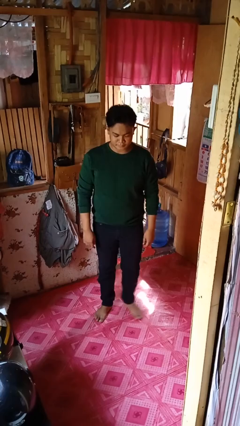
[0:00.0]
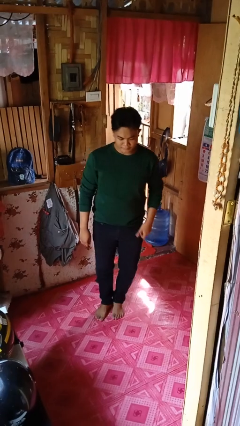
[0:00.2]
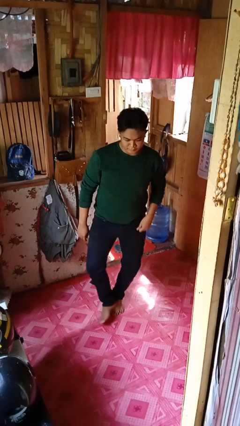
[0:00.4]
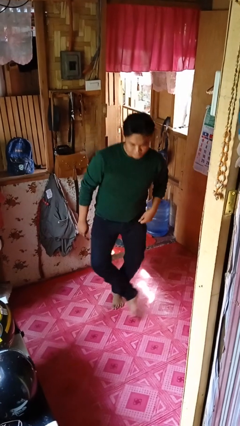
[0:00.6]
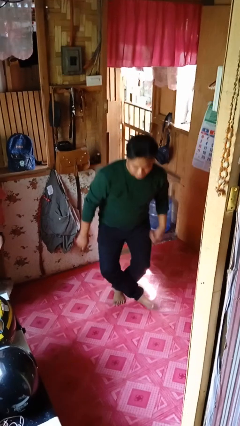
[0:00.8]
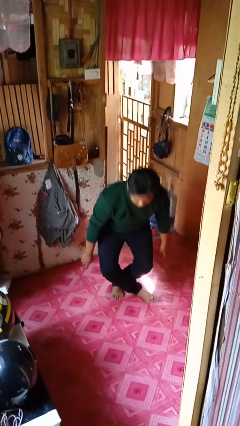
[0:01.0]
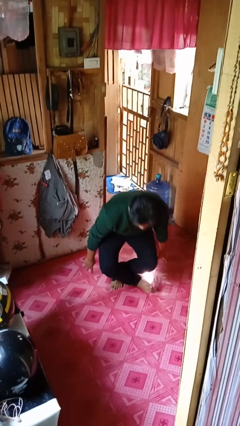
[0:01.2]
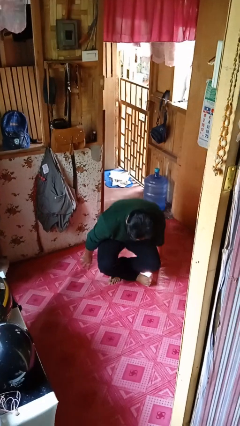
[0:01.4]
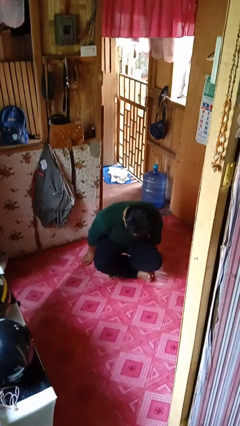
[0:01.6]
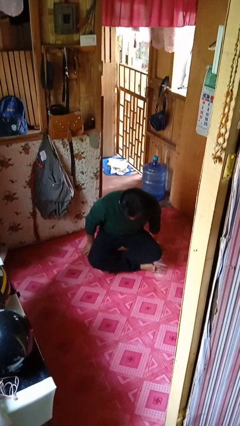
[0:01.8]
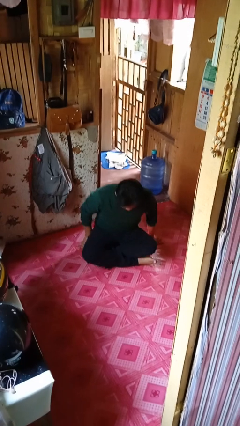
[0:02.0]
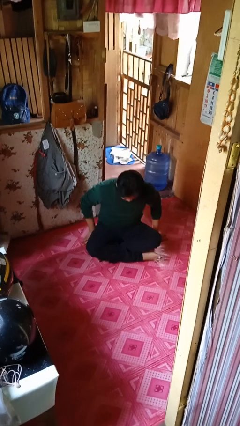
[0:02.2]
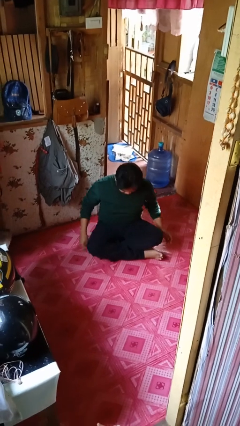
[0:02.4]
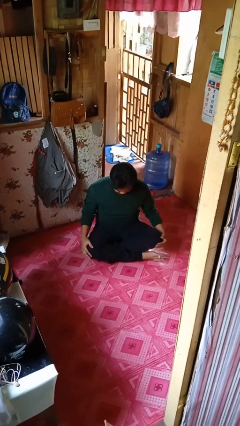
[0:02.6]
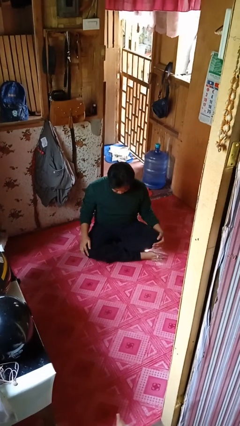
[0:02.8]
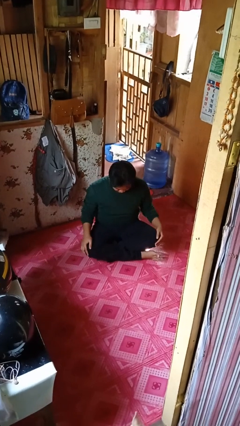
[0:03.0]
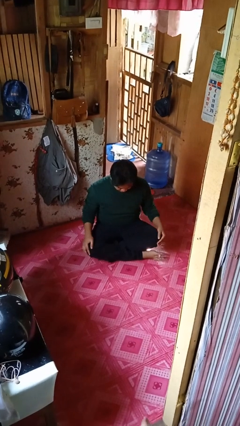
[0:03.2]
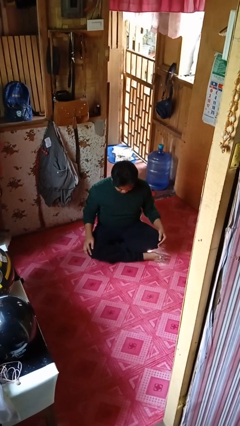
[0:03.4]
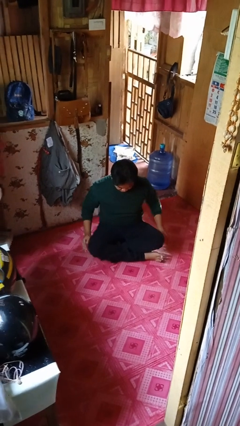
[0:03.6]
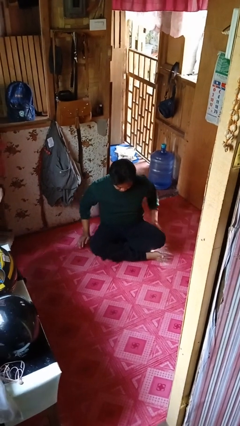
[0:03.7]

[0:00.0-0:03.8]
person sits crisscross

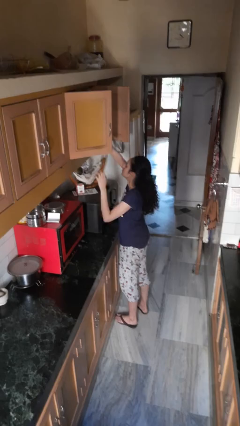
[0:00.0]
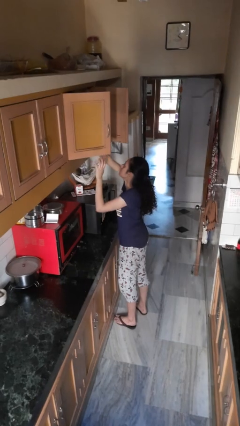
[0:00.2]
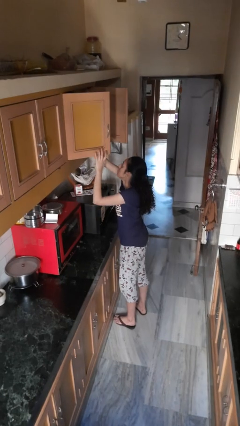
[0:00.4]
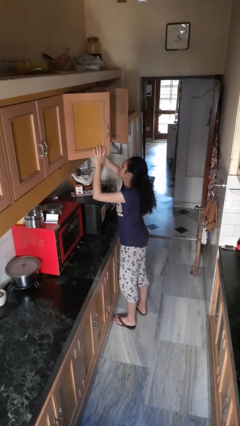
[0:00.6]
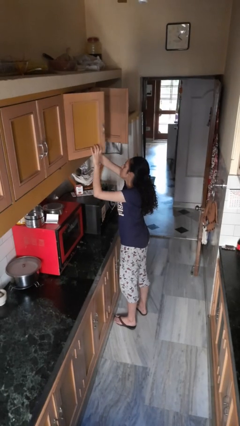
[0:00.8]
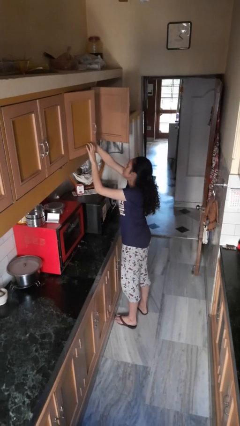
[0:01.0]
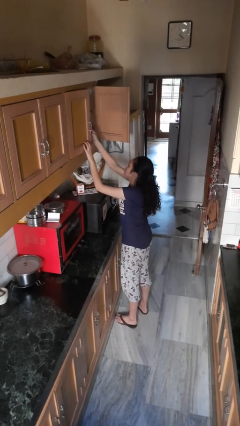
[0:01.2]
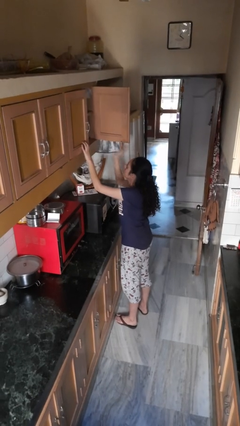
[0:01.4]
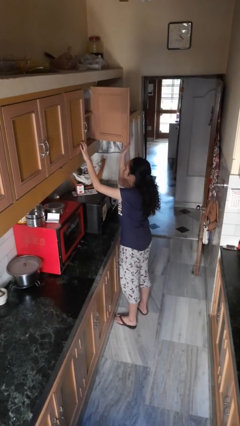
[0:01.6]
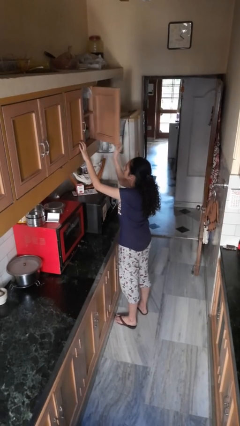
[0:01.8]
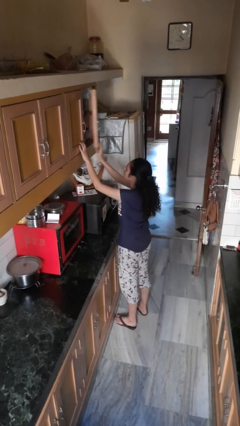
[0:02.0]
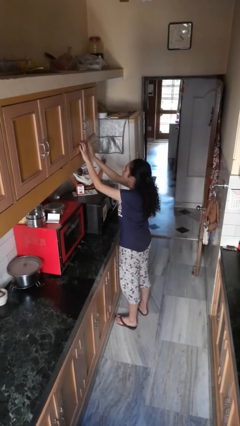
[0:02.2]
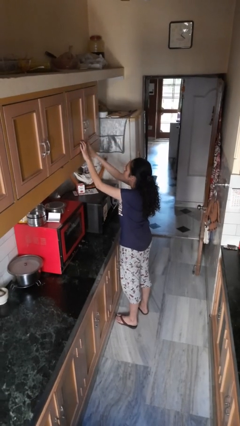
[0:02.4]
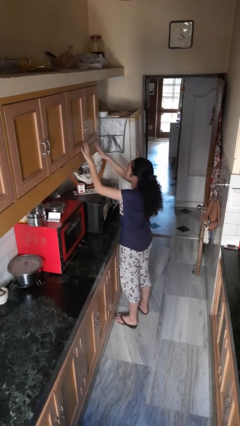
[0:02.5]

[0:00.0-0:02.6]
person puts object in cabinet

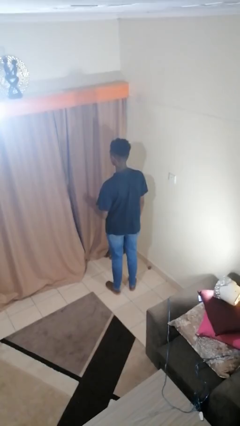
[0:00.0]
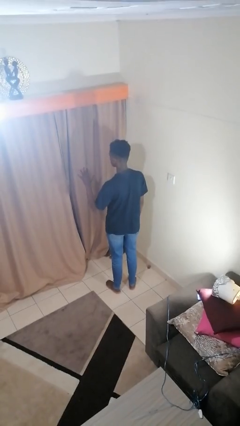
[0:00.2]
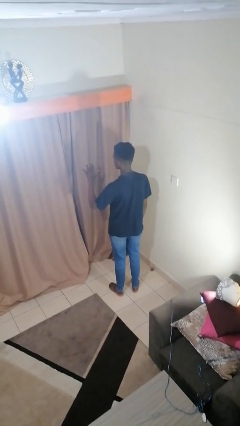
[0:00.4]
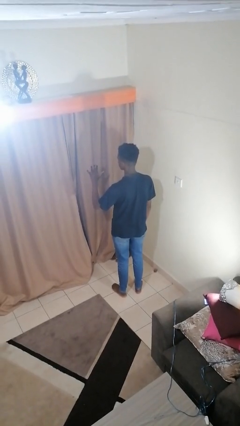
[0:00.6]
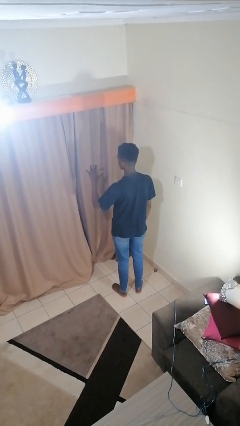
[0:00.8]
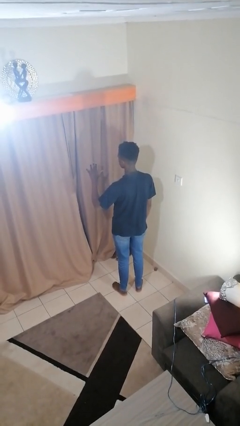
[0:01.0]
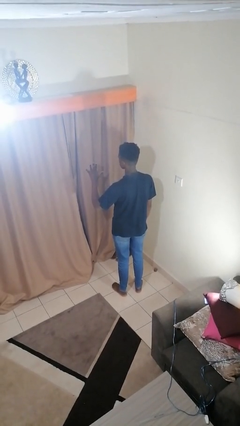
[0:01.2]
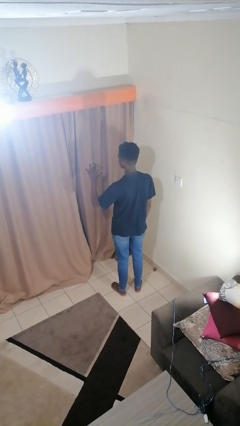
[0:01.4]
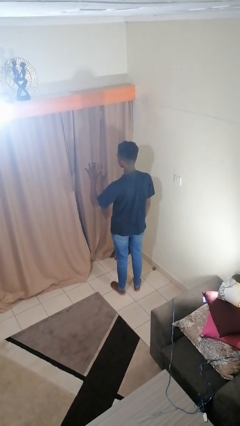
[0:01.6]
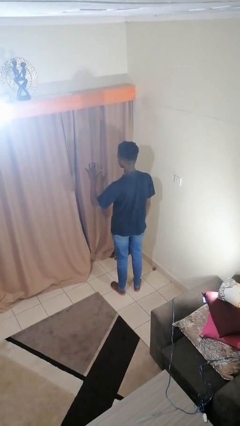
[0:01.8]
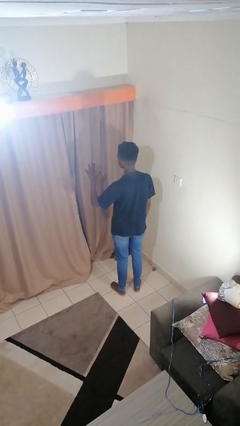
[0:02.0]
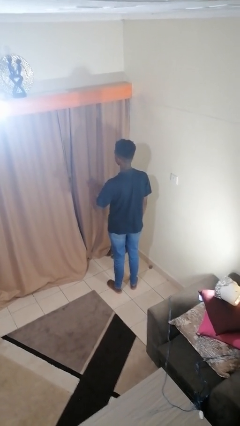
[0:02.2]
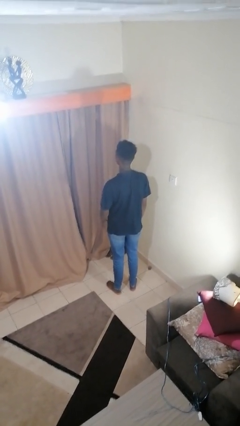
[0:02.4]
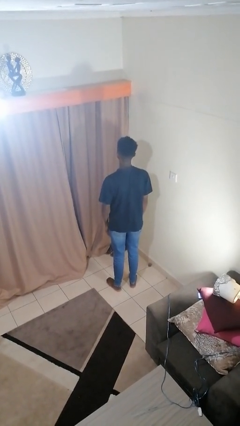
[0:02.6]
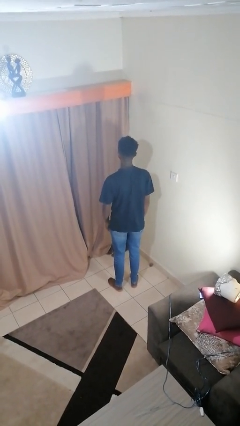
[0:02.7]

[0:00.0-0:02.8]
person gestures number five

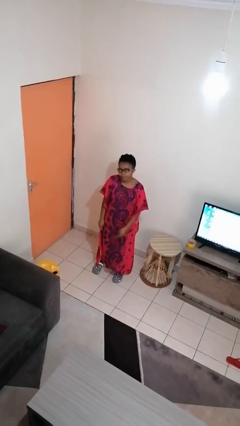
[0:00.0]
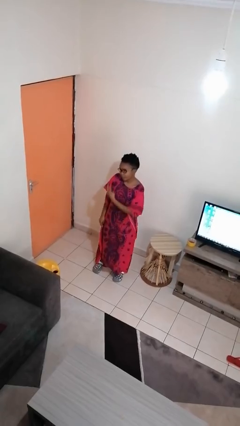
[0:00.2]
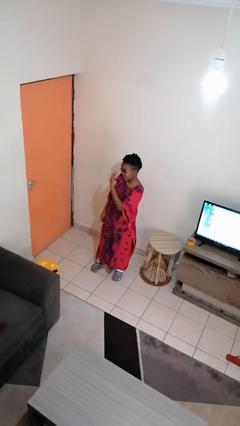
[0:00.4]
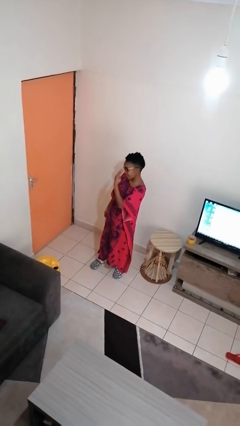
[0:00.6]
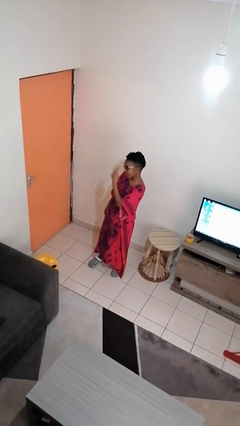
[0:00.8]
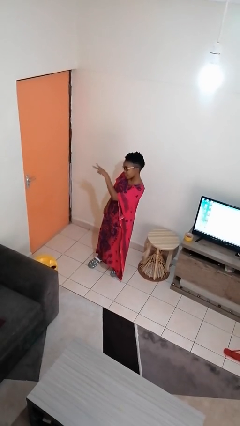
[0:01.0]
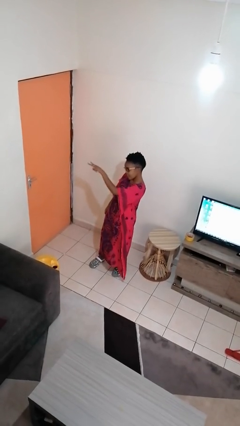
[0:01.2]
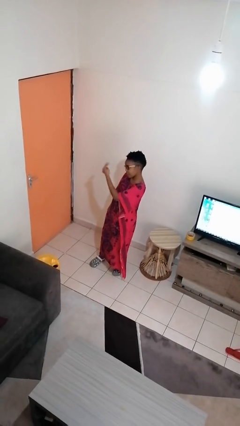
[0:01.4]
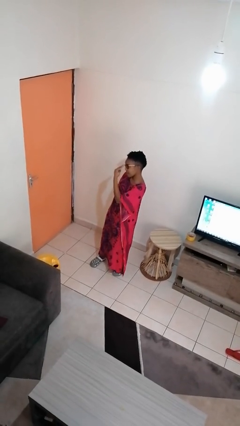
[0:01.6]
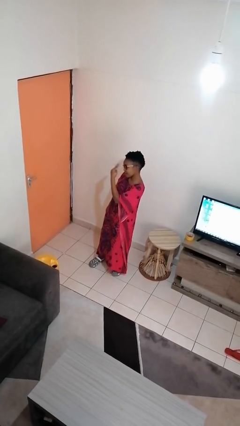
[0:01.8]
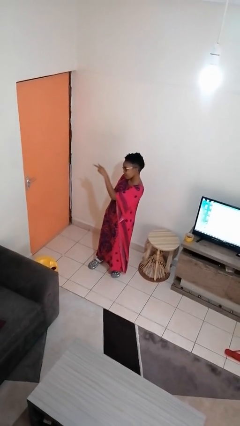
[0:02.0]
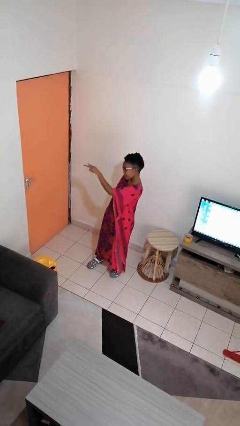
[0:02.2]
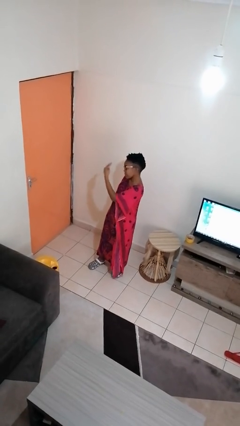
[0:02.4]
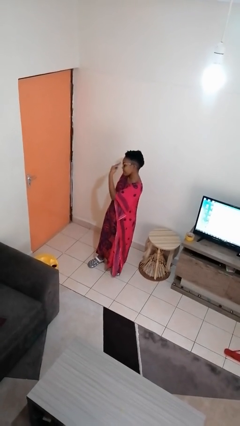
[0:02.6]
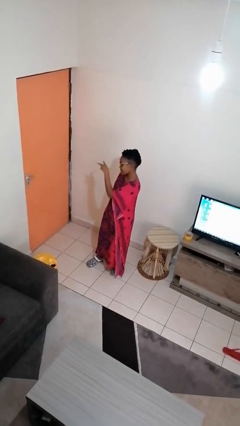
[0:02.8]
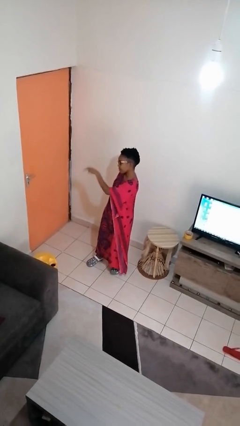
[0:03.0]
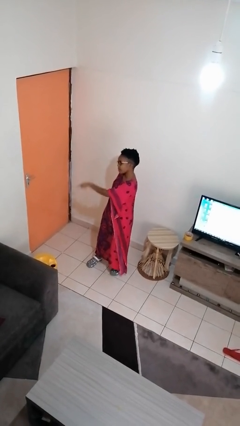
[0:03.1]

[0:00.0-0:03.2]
person gestures watch closely

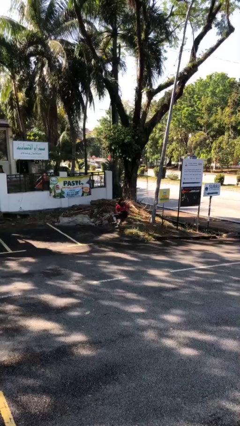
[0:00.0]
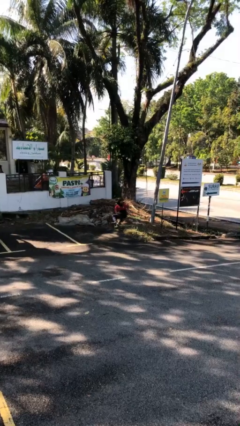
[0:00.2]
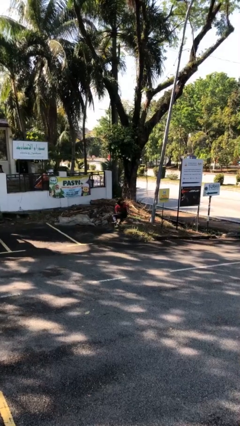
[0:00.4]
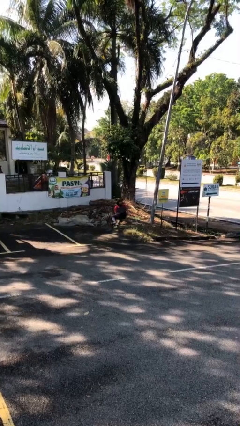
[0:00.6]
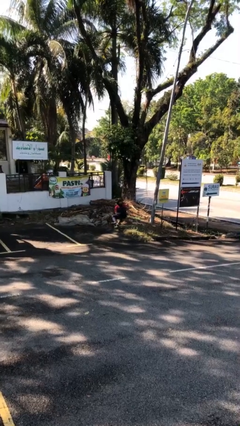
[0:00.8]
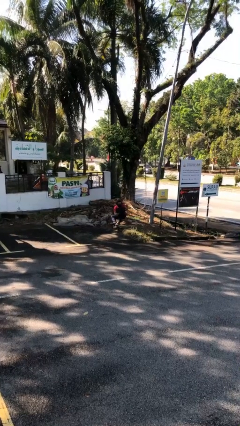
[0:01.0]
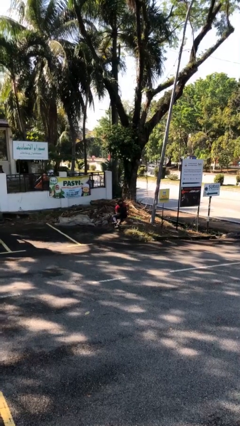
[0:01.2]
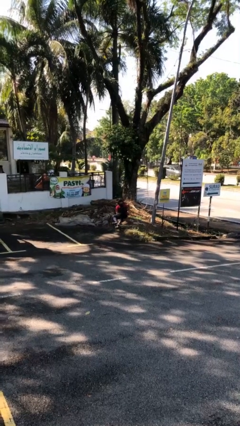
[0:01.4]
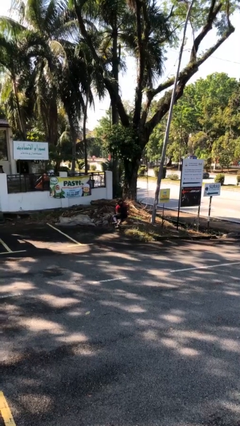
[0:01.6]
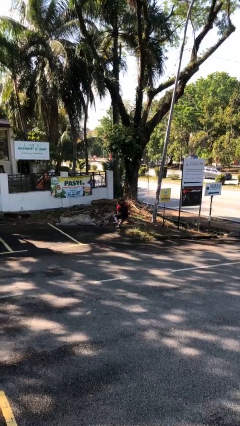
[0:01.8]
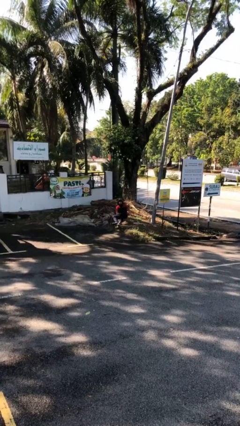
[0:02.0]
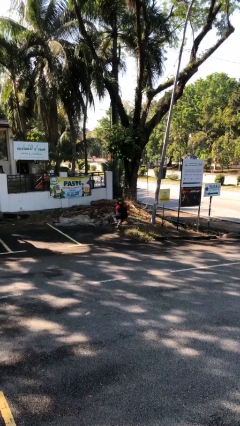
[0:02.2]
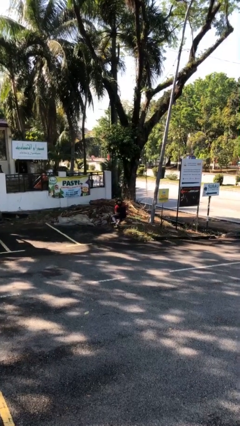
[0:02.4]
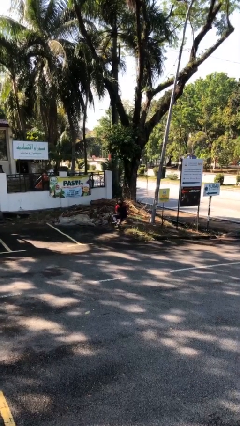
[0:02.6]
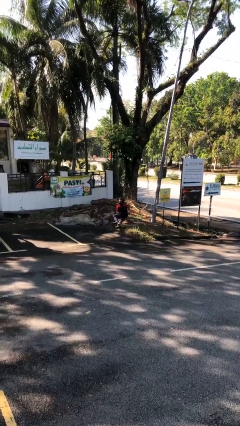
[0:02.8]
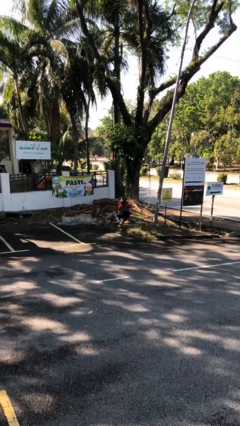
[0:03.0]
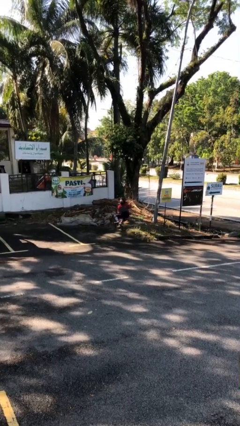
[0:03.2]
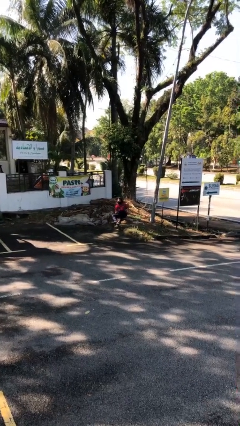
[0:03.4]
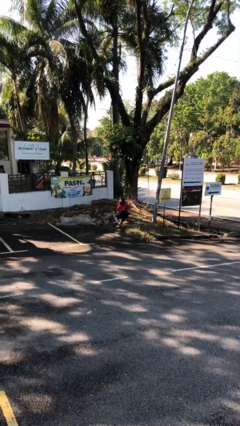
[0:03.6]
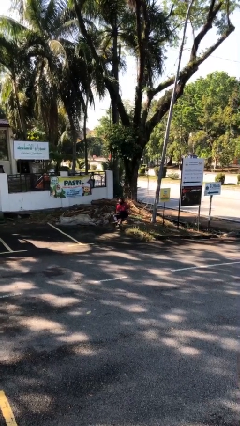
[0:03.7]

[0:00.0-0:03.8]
person interacts with laptop

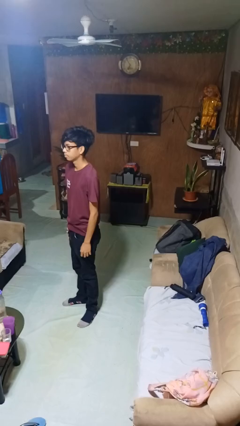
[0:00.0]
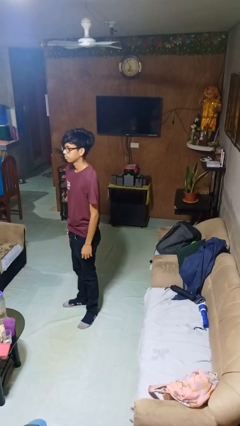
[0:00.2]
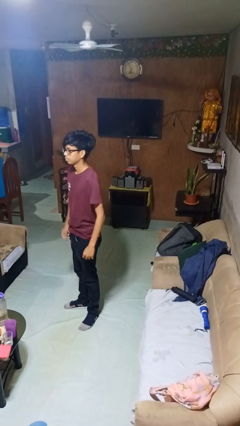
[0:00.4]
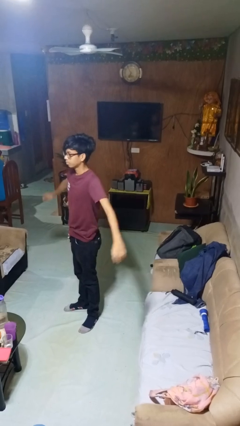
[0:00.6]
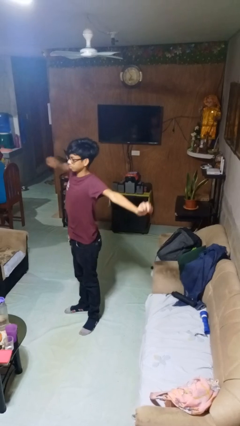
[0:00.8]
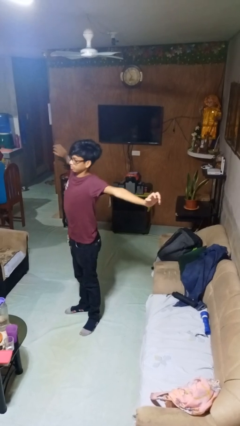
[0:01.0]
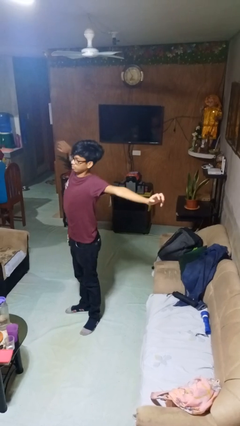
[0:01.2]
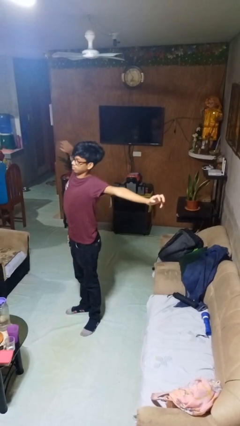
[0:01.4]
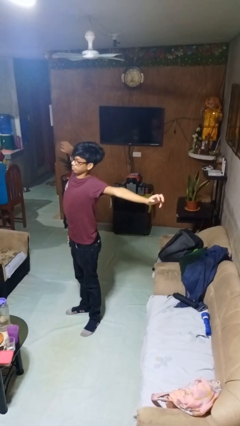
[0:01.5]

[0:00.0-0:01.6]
person stretches arms to side
